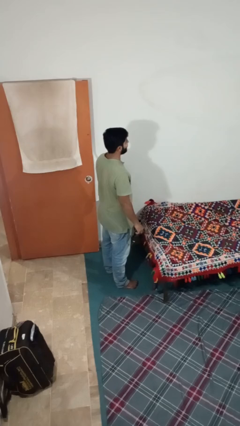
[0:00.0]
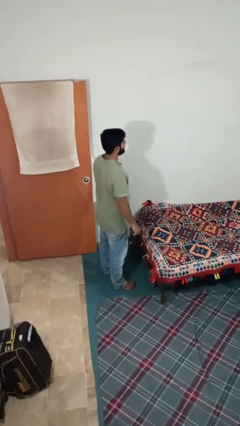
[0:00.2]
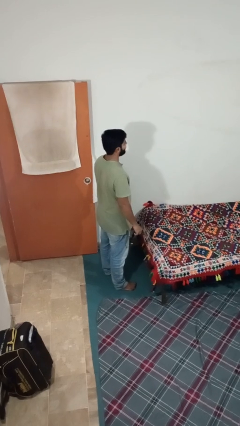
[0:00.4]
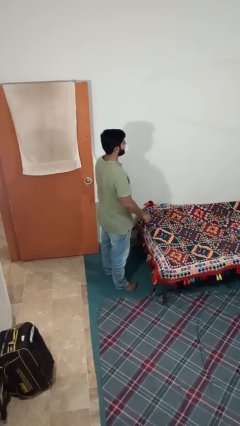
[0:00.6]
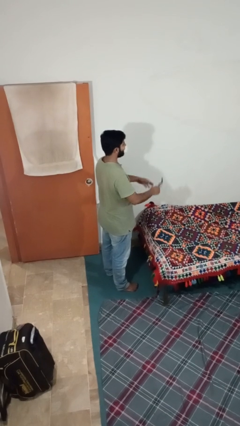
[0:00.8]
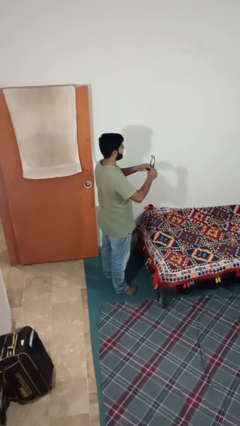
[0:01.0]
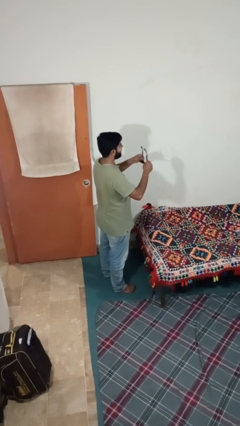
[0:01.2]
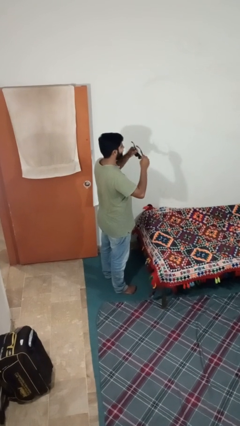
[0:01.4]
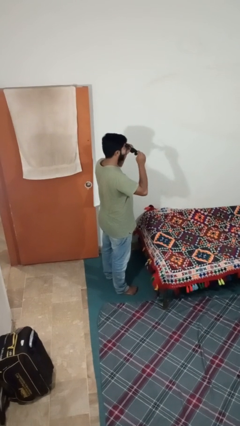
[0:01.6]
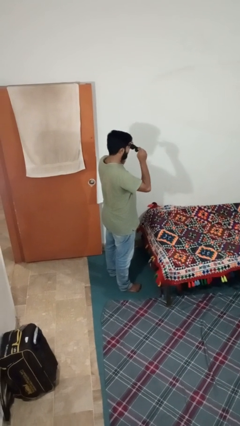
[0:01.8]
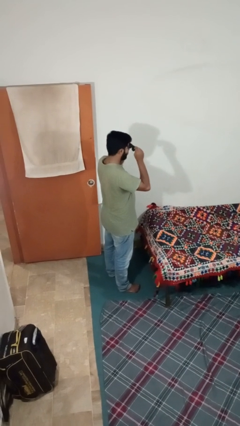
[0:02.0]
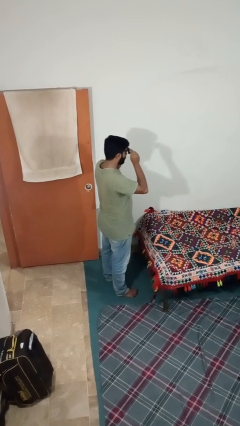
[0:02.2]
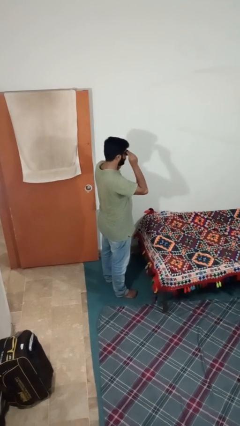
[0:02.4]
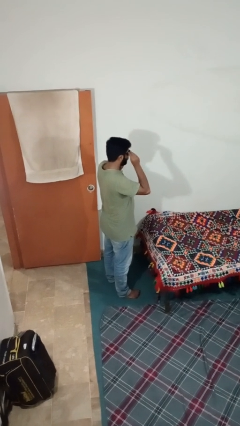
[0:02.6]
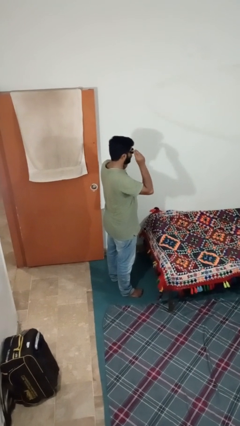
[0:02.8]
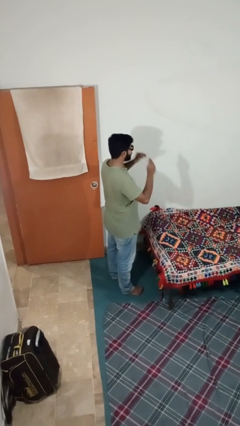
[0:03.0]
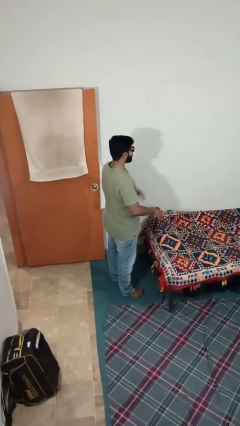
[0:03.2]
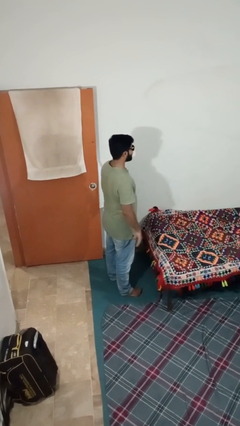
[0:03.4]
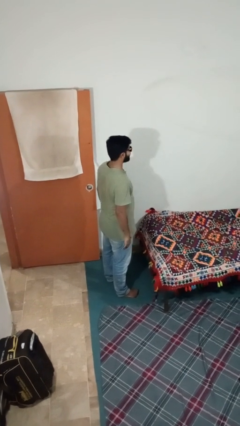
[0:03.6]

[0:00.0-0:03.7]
person puts on sunglasses

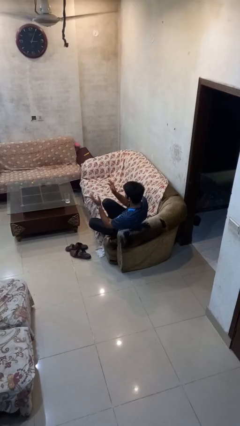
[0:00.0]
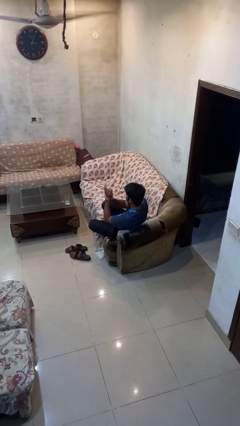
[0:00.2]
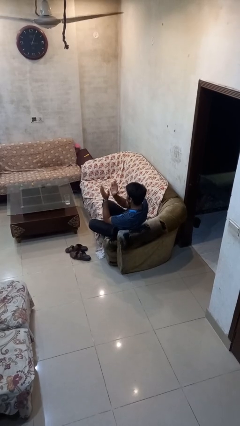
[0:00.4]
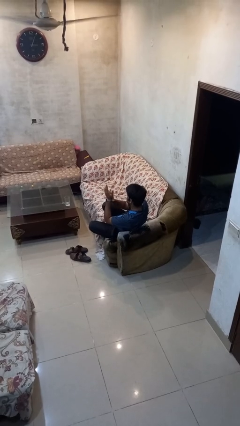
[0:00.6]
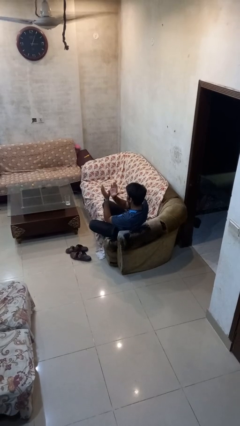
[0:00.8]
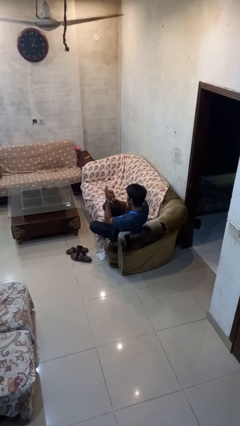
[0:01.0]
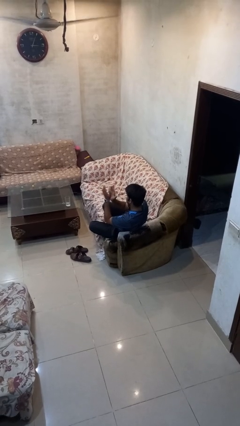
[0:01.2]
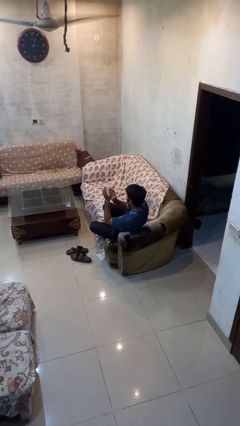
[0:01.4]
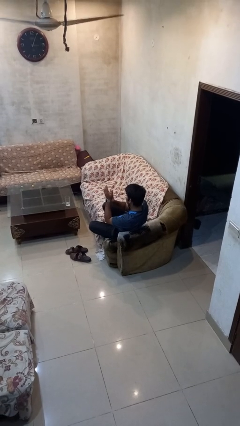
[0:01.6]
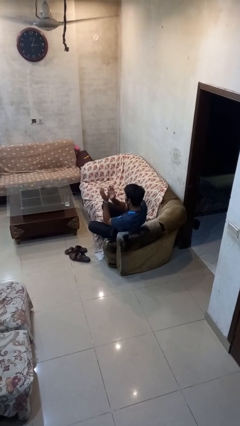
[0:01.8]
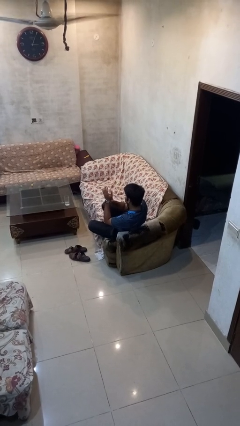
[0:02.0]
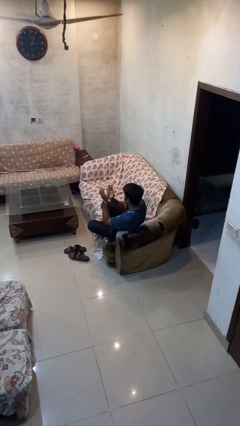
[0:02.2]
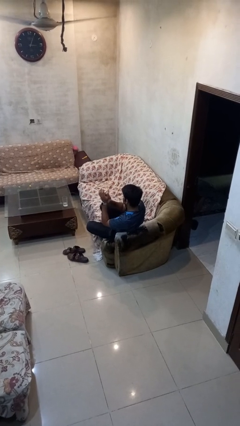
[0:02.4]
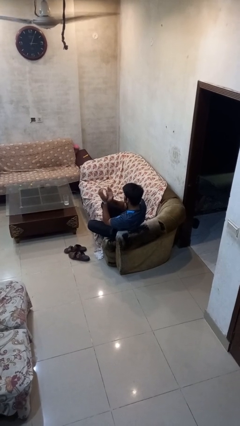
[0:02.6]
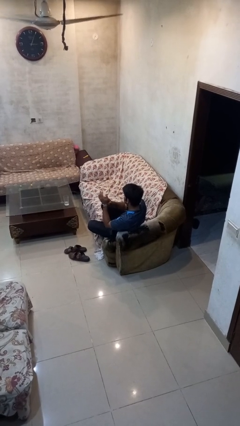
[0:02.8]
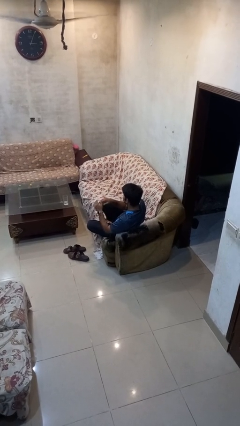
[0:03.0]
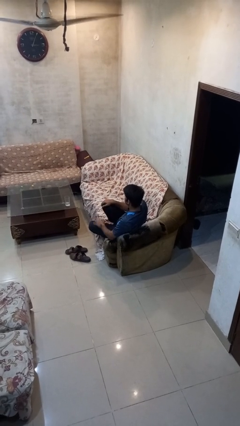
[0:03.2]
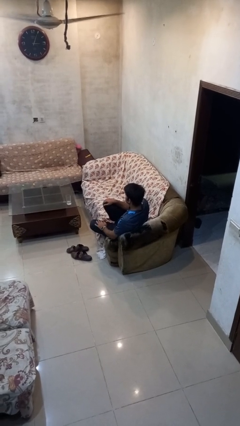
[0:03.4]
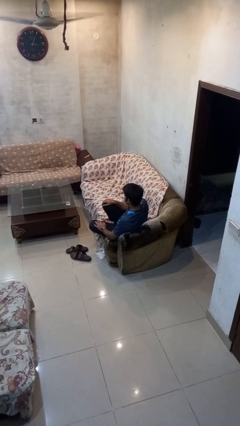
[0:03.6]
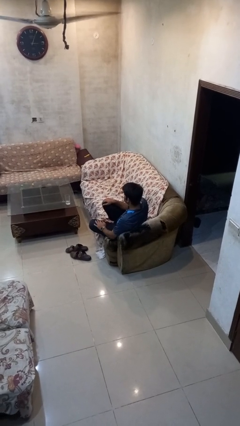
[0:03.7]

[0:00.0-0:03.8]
person claps hands

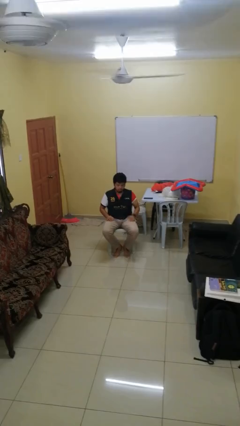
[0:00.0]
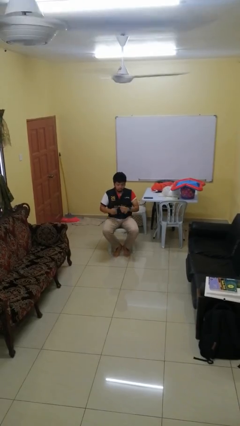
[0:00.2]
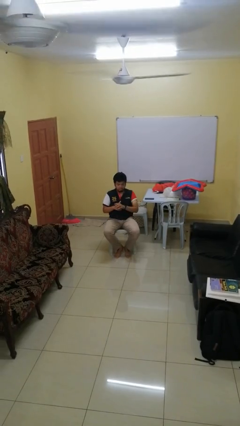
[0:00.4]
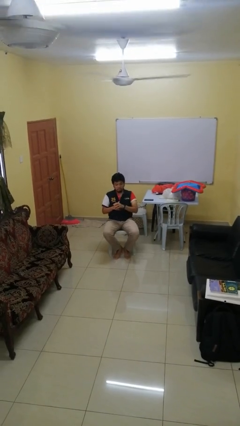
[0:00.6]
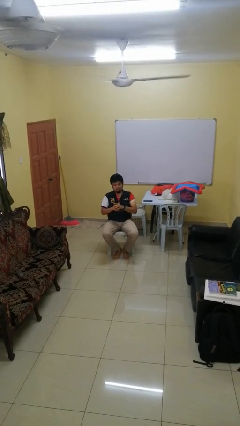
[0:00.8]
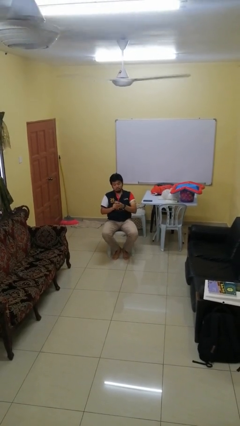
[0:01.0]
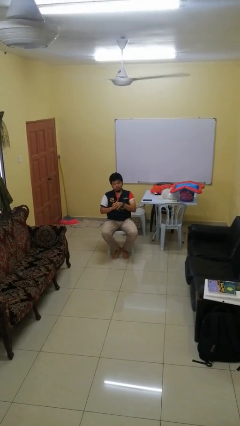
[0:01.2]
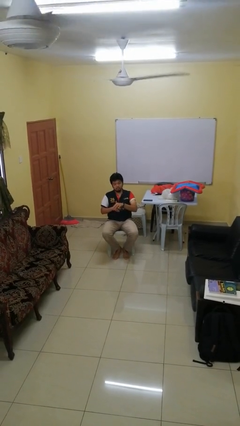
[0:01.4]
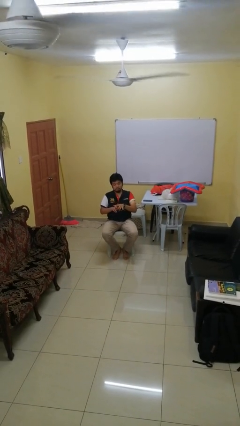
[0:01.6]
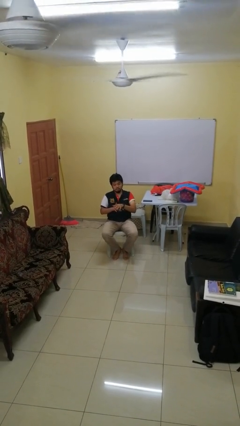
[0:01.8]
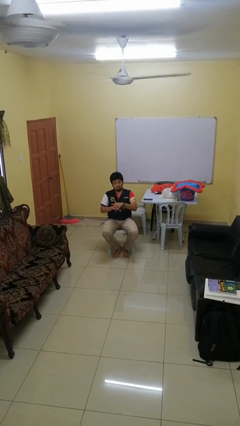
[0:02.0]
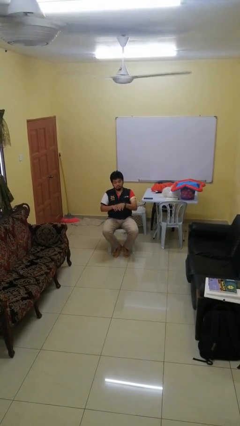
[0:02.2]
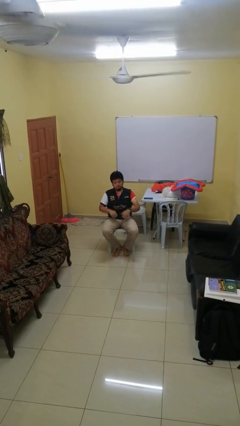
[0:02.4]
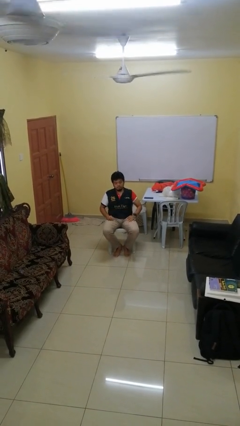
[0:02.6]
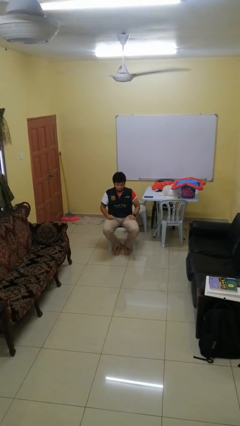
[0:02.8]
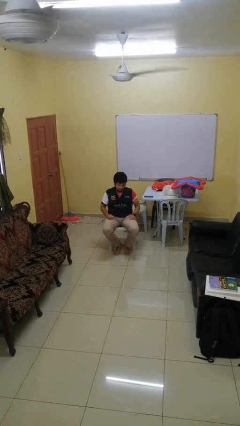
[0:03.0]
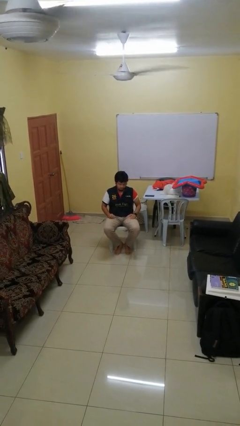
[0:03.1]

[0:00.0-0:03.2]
person cracks knuckles

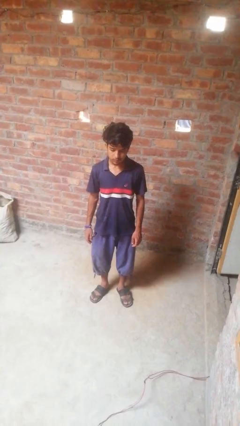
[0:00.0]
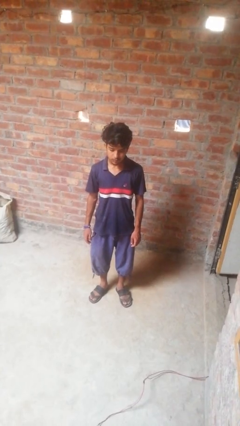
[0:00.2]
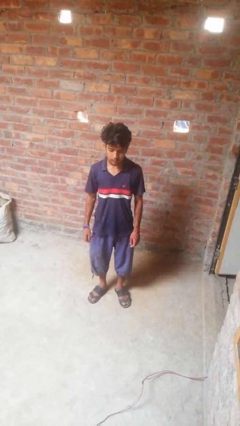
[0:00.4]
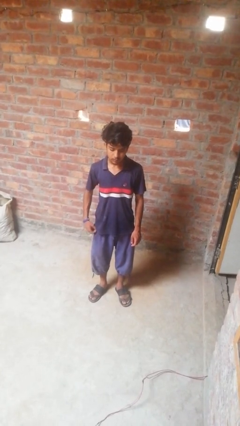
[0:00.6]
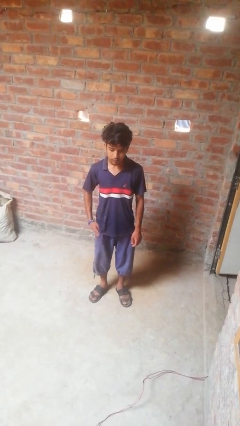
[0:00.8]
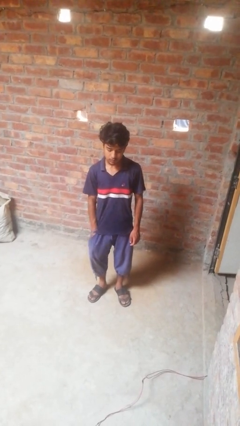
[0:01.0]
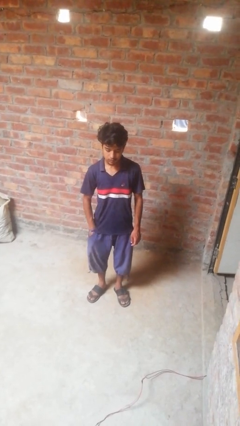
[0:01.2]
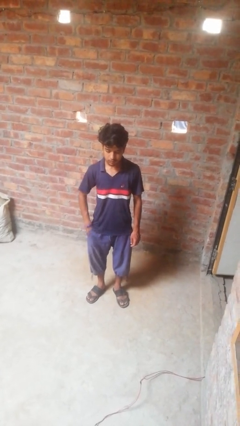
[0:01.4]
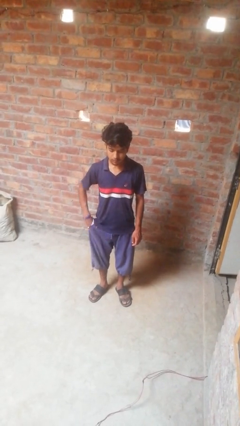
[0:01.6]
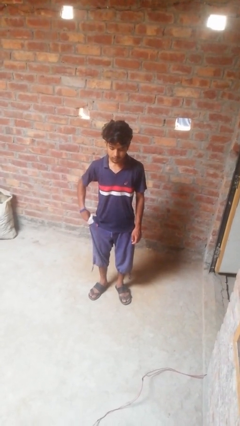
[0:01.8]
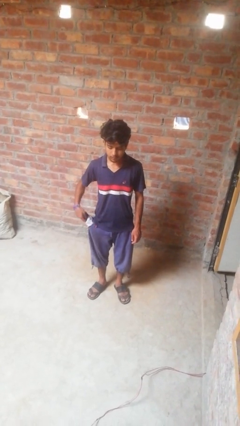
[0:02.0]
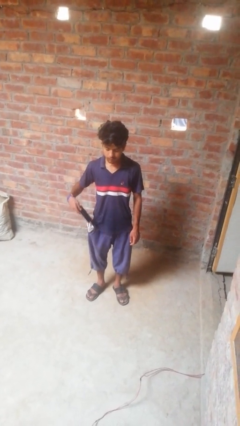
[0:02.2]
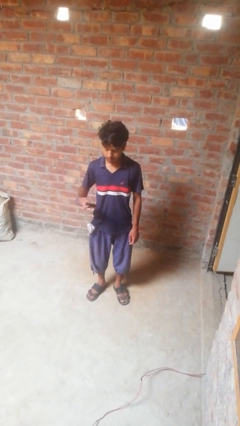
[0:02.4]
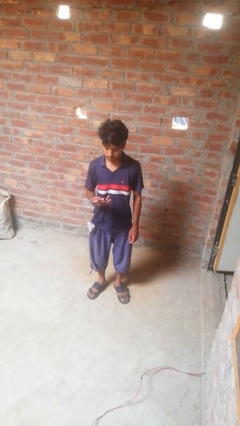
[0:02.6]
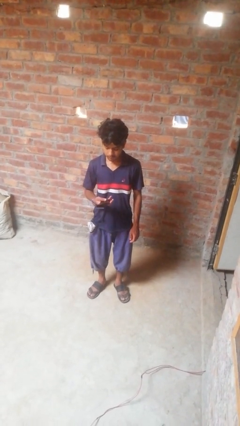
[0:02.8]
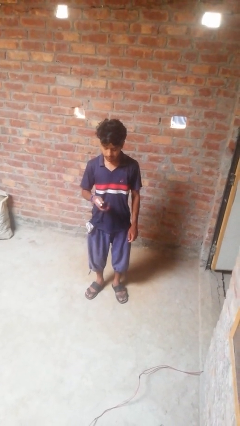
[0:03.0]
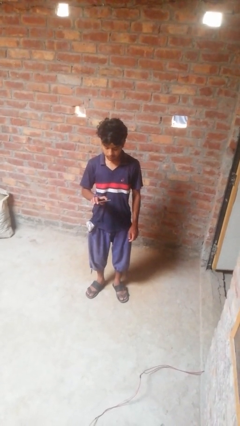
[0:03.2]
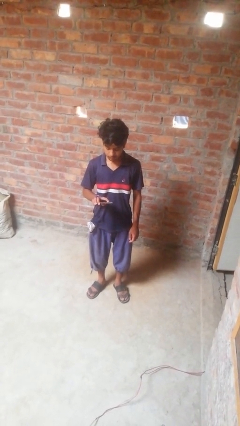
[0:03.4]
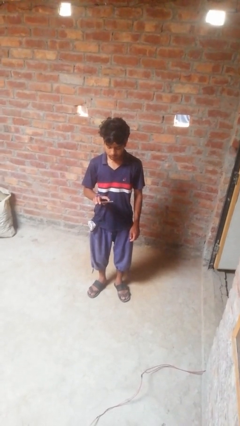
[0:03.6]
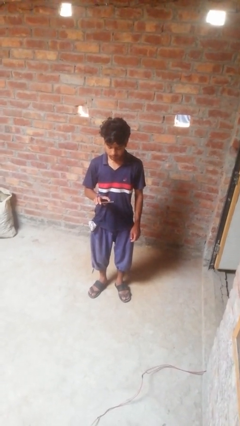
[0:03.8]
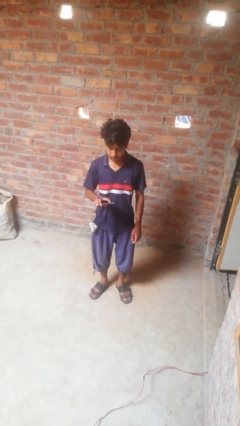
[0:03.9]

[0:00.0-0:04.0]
person takes phone from pocket

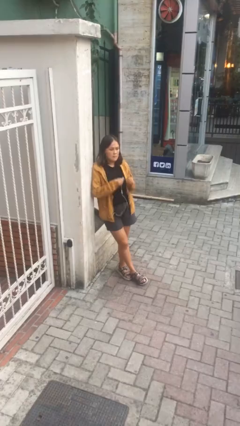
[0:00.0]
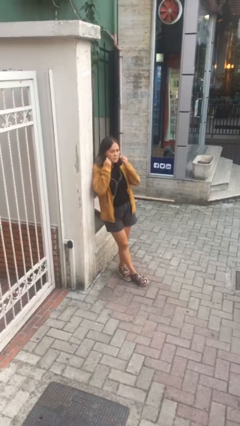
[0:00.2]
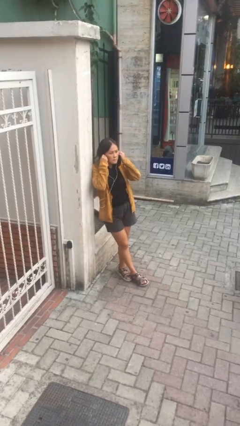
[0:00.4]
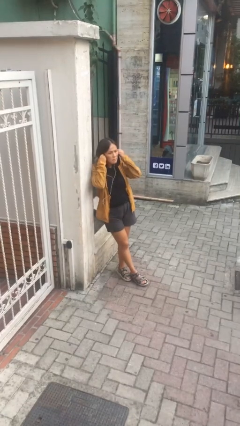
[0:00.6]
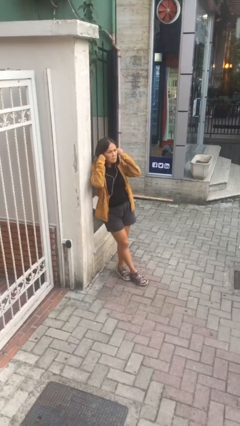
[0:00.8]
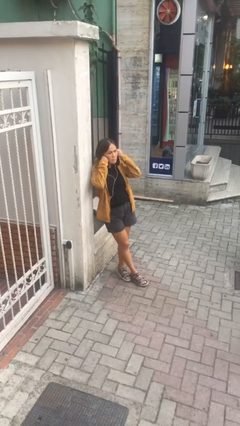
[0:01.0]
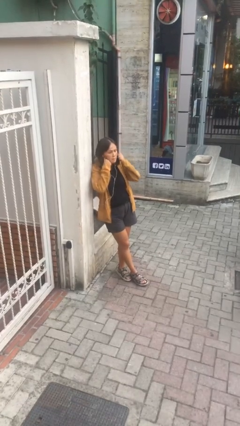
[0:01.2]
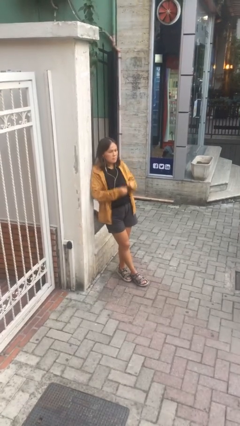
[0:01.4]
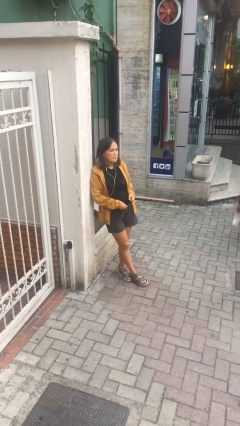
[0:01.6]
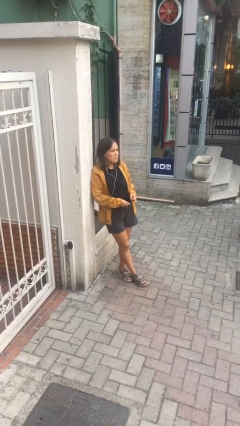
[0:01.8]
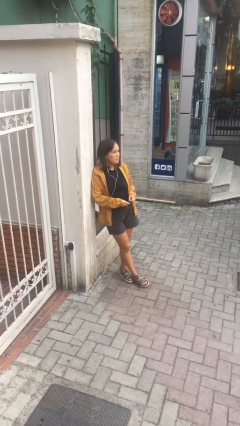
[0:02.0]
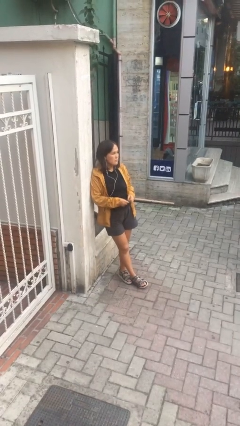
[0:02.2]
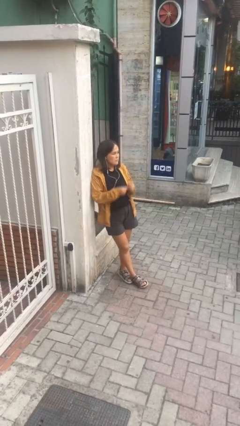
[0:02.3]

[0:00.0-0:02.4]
person puts on headphones

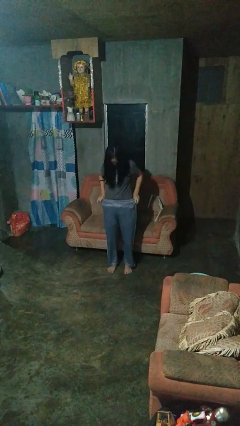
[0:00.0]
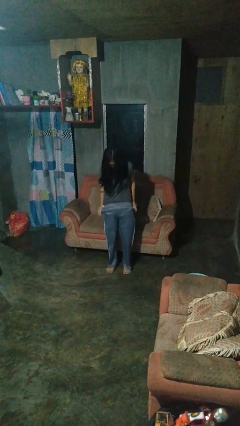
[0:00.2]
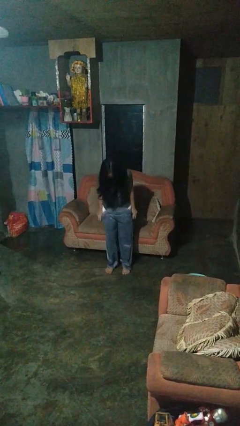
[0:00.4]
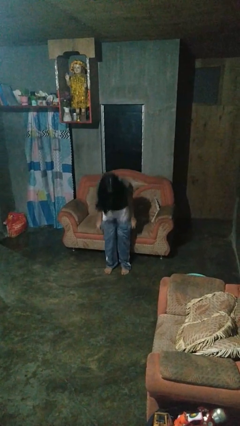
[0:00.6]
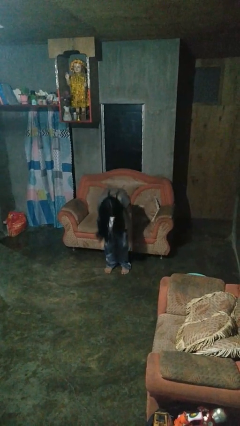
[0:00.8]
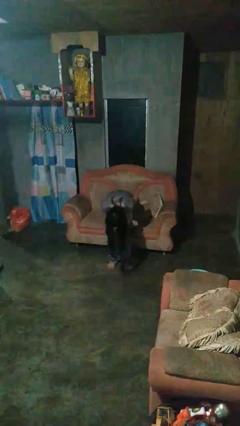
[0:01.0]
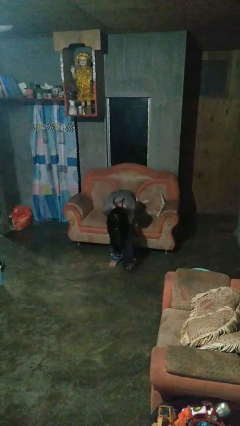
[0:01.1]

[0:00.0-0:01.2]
person takes off pants
